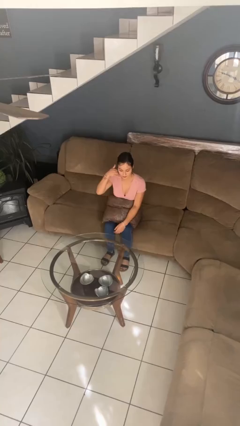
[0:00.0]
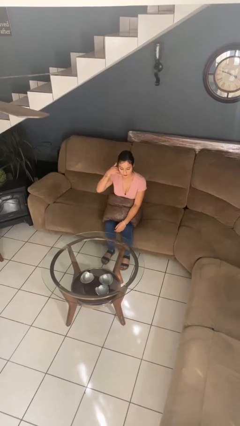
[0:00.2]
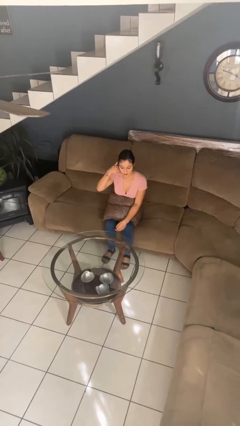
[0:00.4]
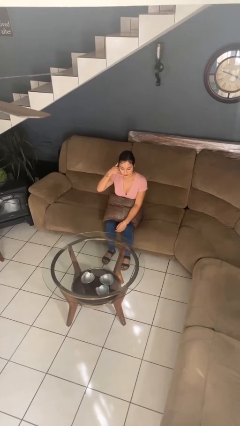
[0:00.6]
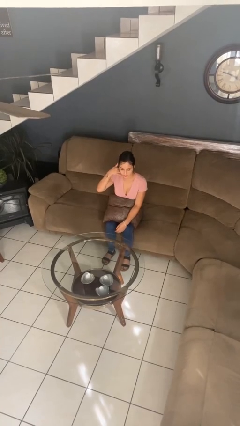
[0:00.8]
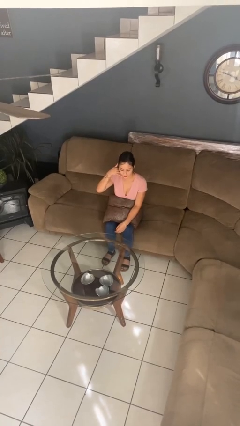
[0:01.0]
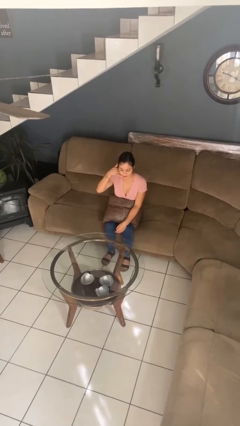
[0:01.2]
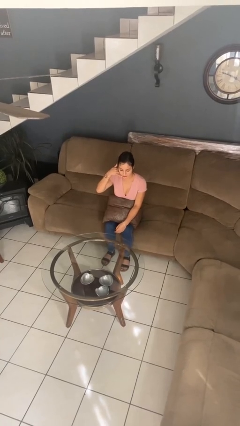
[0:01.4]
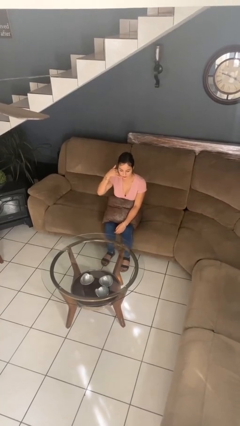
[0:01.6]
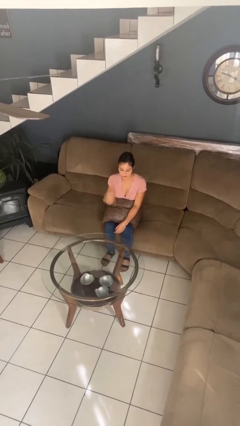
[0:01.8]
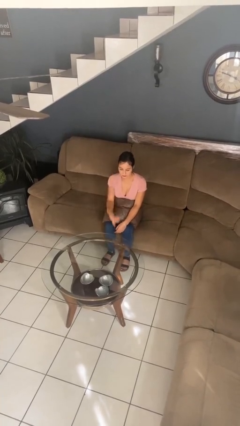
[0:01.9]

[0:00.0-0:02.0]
person gestures call me

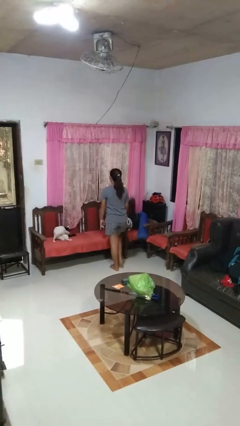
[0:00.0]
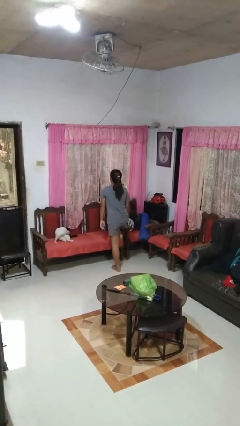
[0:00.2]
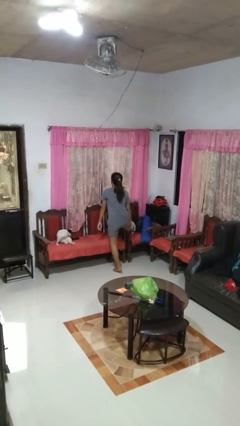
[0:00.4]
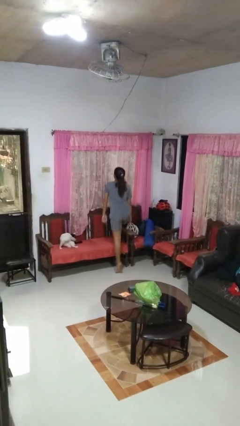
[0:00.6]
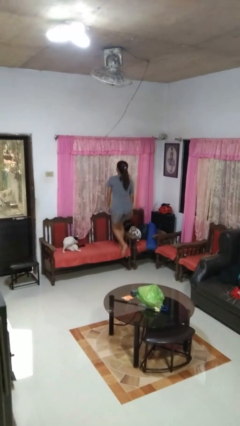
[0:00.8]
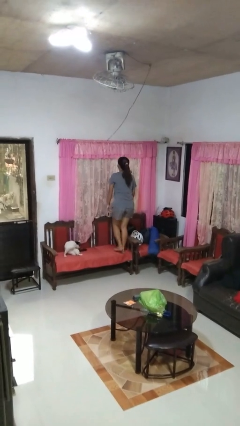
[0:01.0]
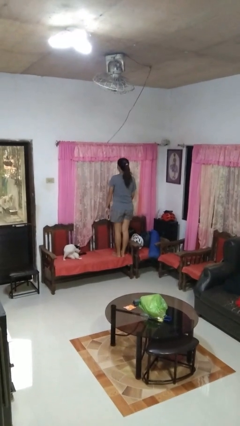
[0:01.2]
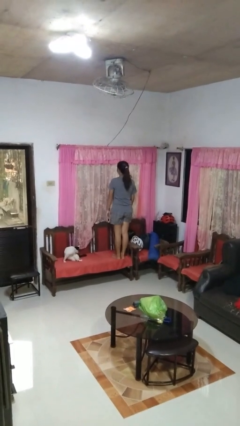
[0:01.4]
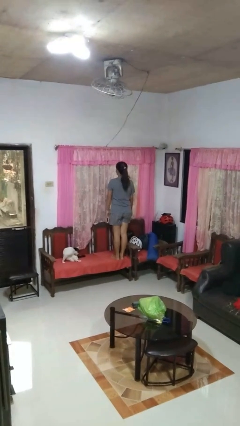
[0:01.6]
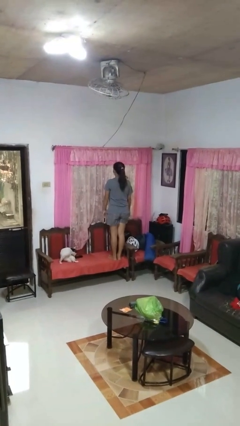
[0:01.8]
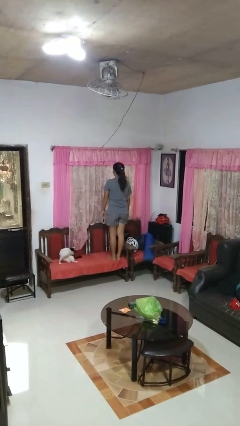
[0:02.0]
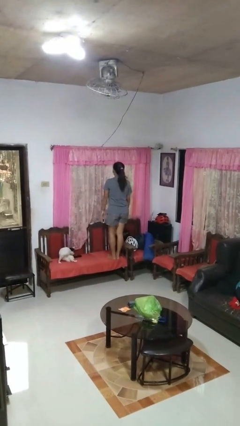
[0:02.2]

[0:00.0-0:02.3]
person climbs on chair

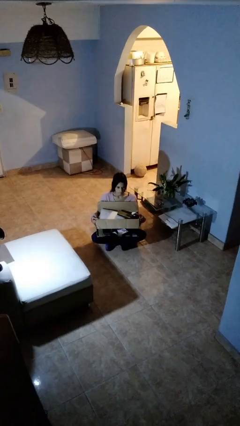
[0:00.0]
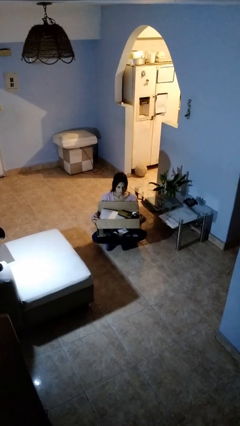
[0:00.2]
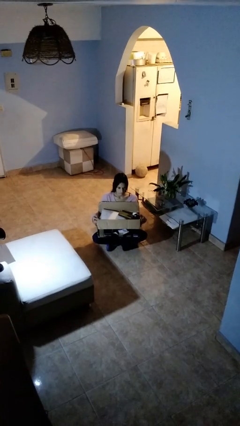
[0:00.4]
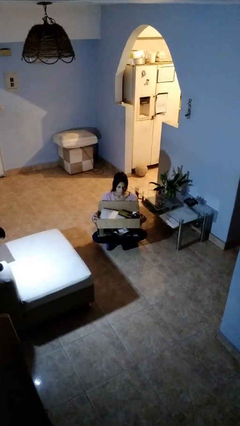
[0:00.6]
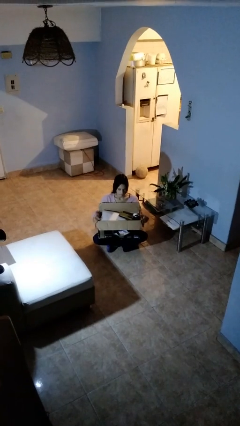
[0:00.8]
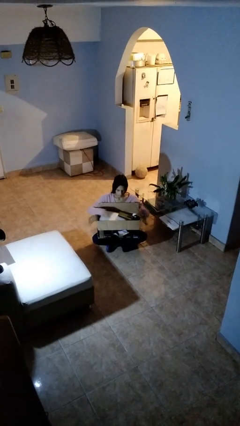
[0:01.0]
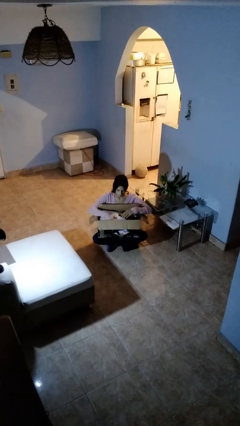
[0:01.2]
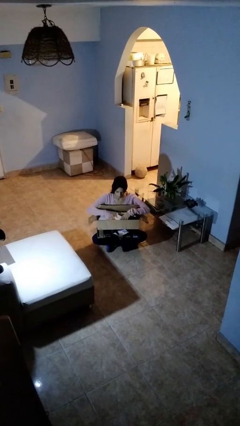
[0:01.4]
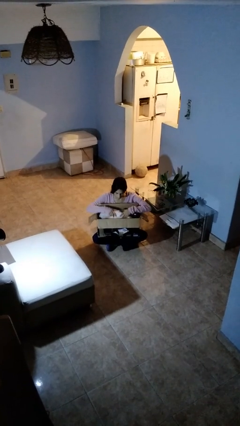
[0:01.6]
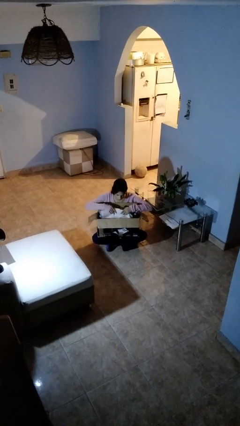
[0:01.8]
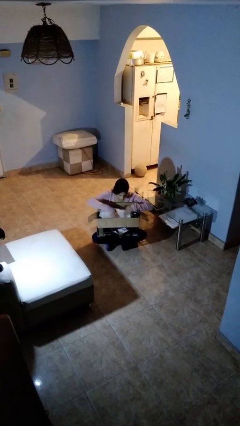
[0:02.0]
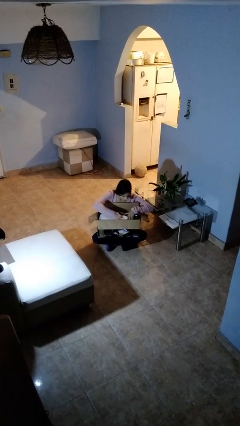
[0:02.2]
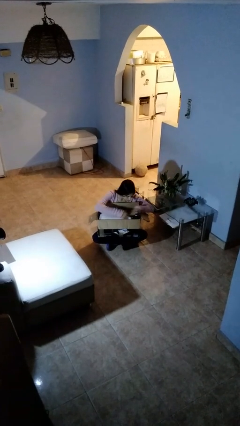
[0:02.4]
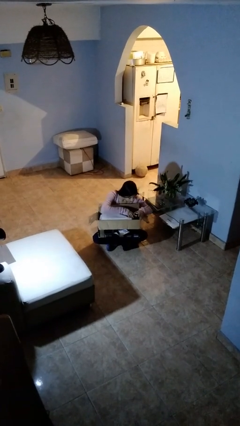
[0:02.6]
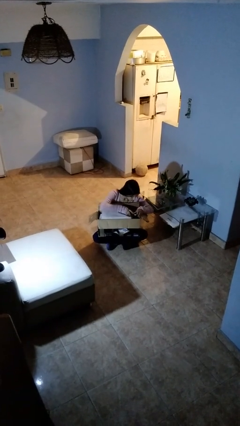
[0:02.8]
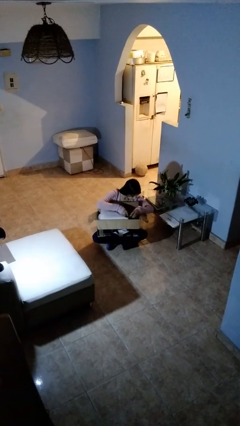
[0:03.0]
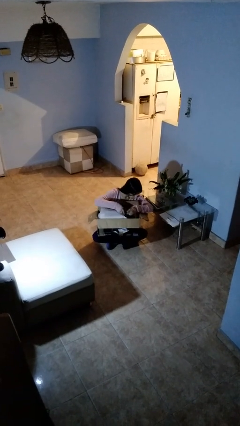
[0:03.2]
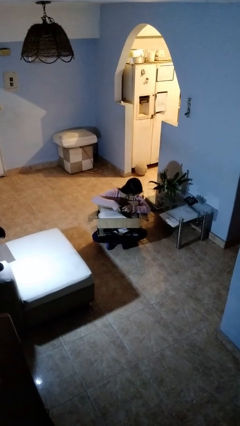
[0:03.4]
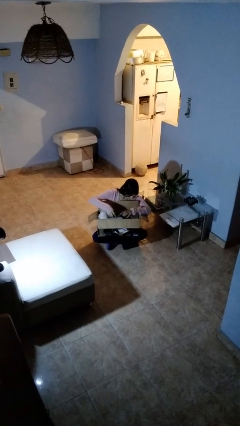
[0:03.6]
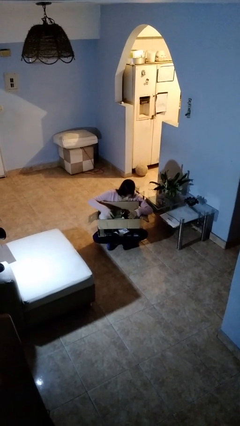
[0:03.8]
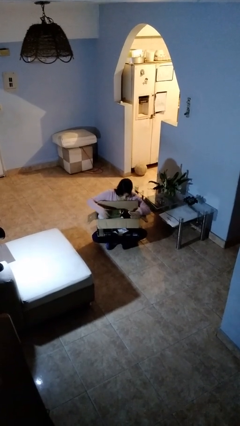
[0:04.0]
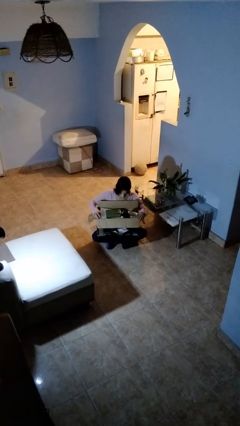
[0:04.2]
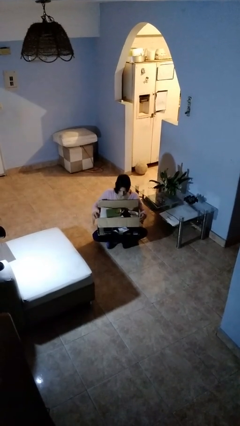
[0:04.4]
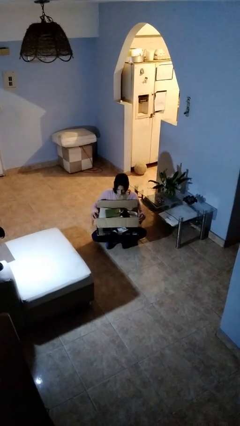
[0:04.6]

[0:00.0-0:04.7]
person searches in box

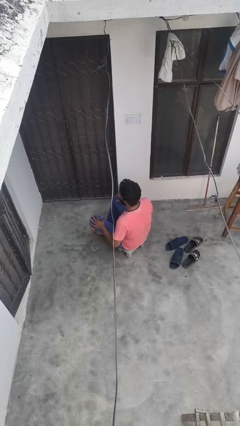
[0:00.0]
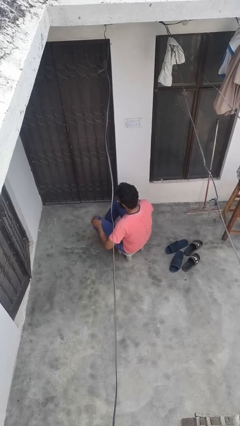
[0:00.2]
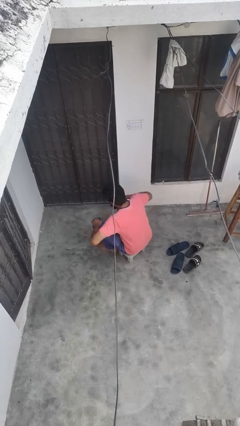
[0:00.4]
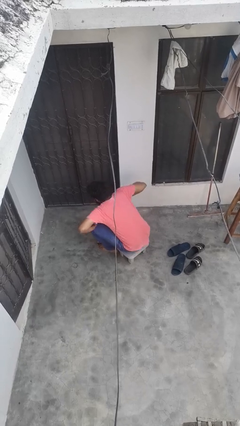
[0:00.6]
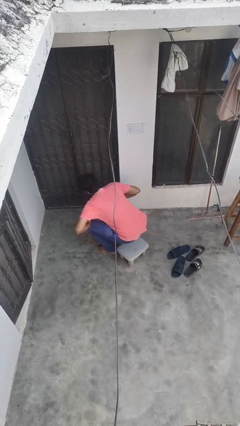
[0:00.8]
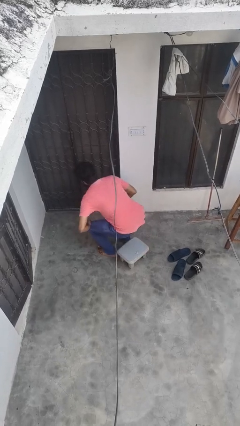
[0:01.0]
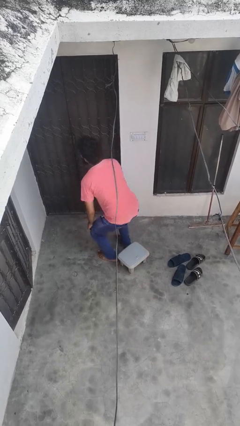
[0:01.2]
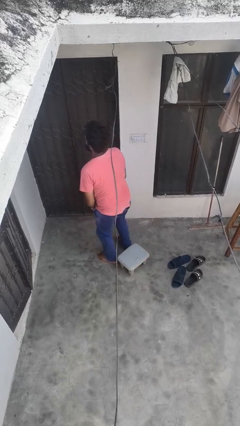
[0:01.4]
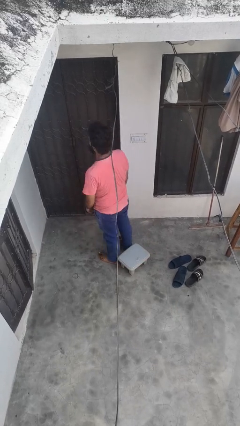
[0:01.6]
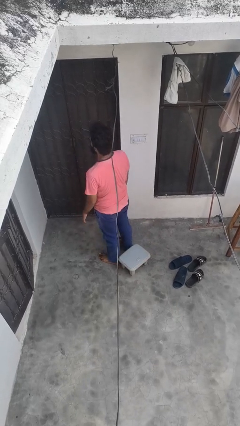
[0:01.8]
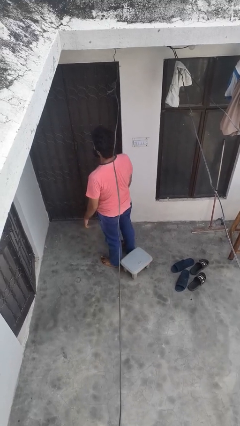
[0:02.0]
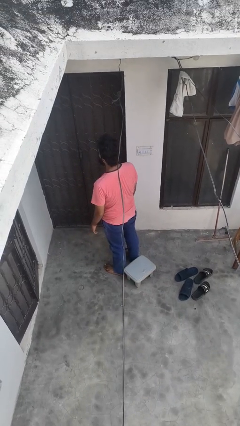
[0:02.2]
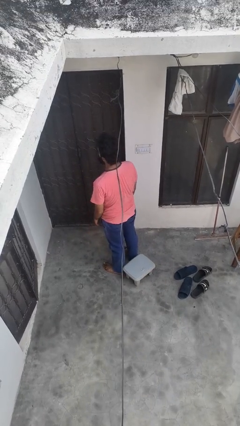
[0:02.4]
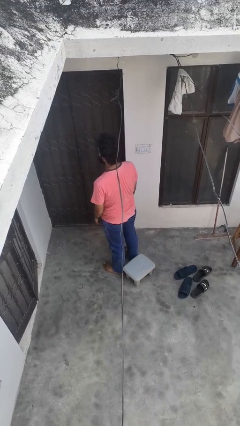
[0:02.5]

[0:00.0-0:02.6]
person stands up from floor

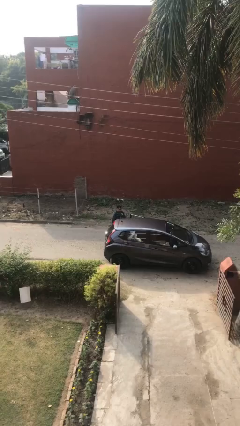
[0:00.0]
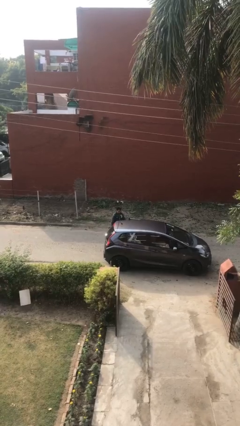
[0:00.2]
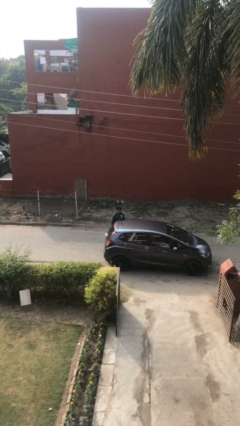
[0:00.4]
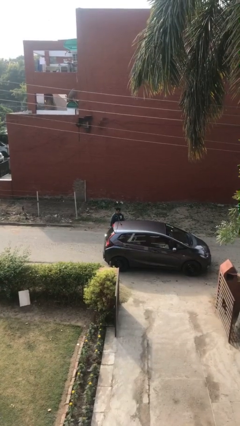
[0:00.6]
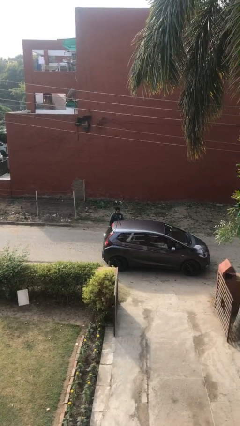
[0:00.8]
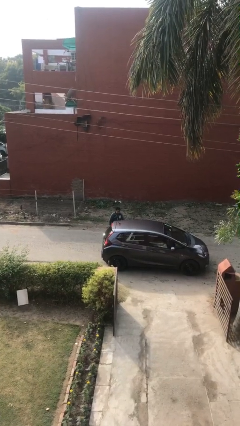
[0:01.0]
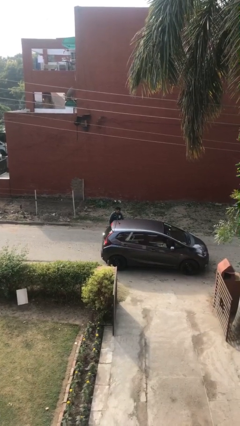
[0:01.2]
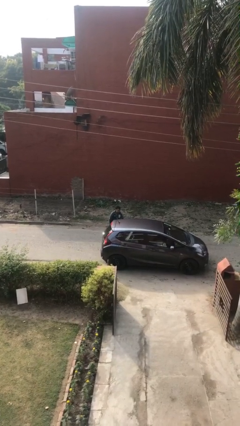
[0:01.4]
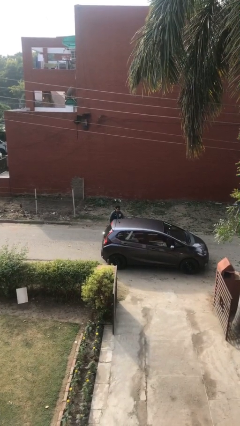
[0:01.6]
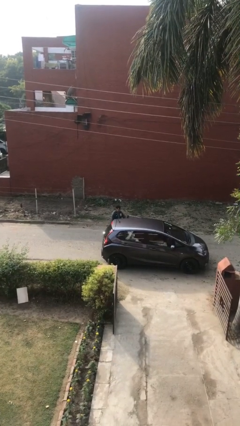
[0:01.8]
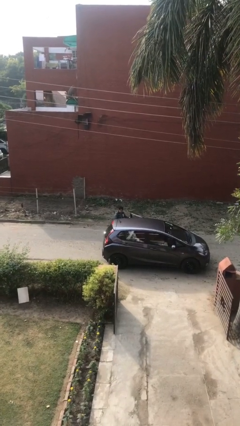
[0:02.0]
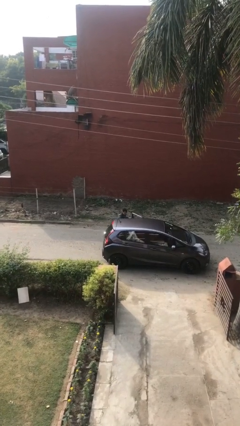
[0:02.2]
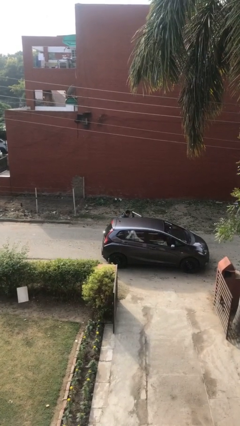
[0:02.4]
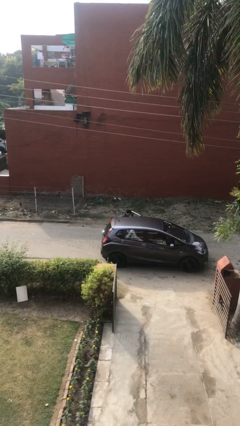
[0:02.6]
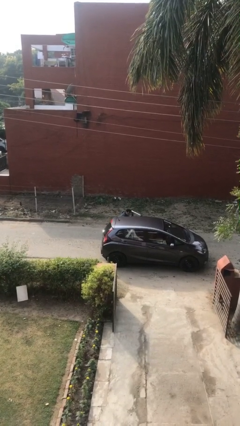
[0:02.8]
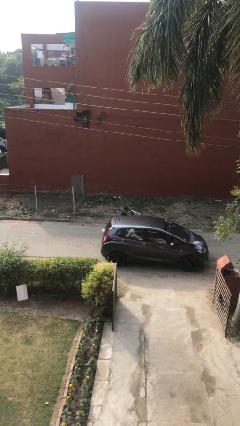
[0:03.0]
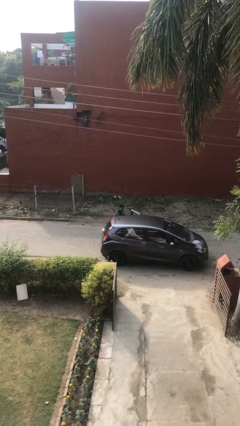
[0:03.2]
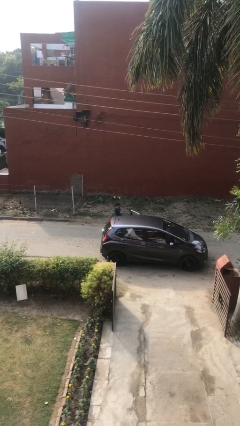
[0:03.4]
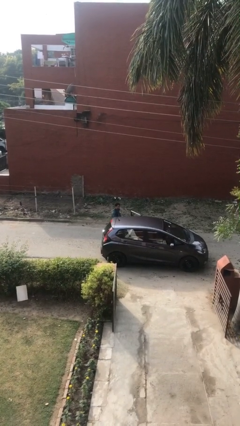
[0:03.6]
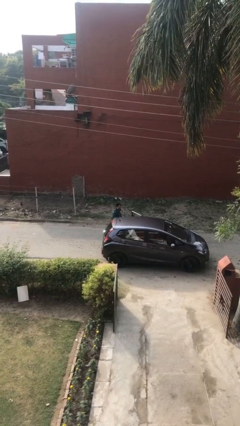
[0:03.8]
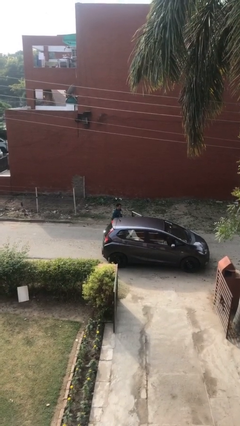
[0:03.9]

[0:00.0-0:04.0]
person unloads car

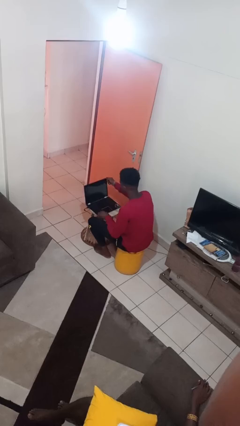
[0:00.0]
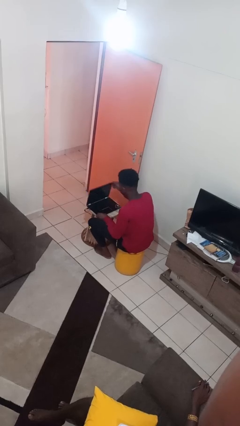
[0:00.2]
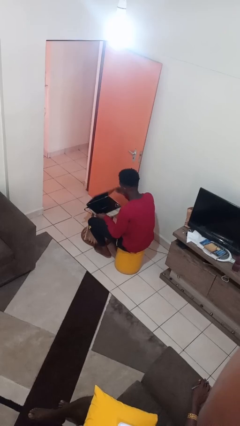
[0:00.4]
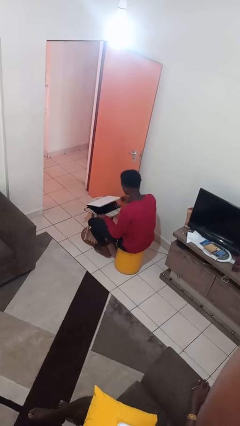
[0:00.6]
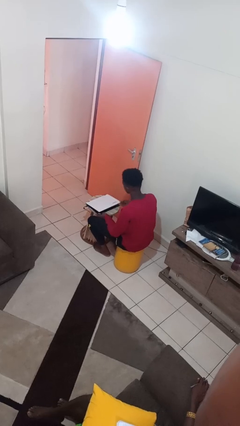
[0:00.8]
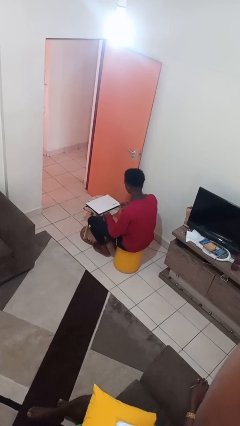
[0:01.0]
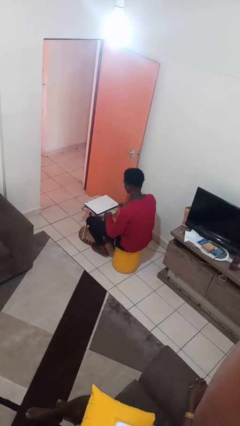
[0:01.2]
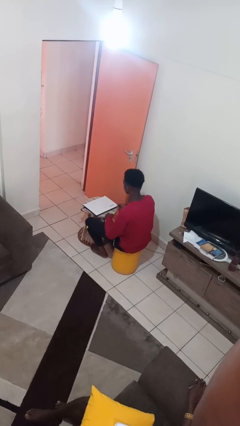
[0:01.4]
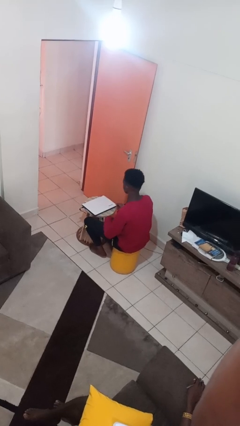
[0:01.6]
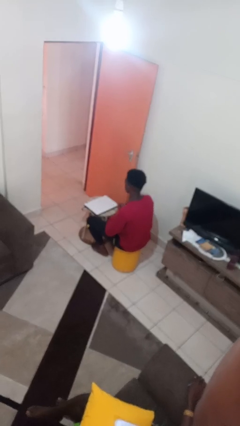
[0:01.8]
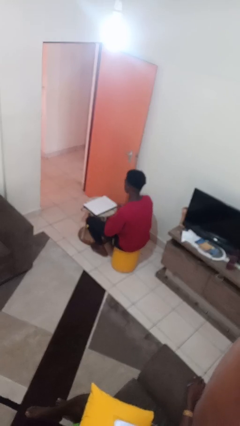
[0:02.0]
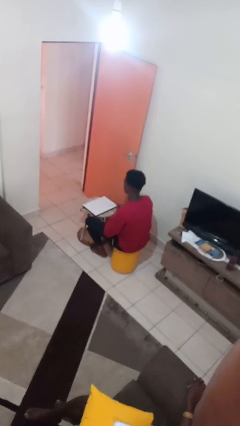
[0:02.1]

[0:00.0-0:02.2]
person closes laptop
